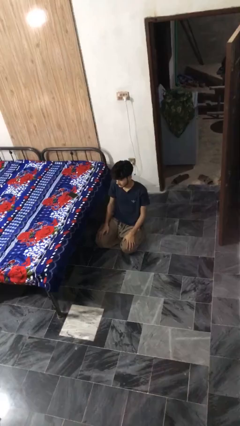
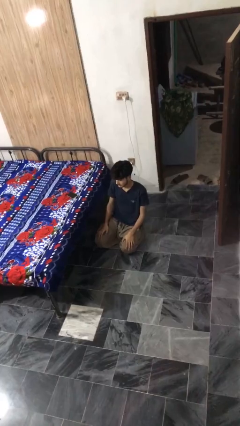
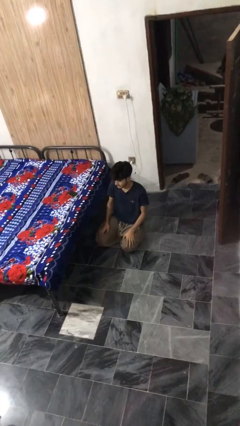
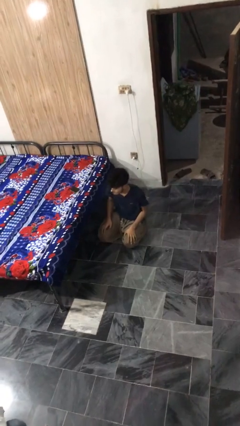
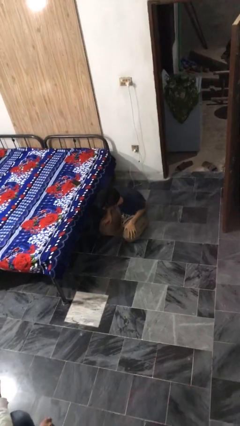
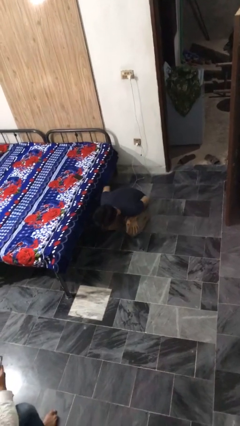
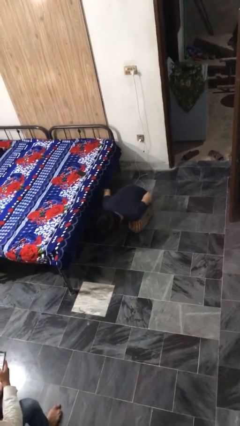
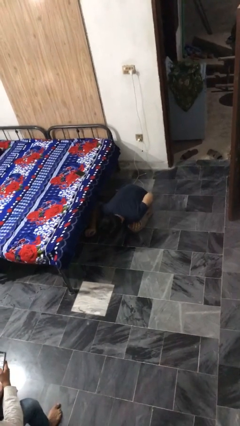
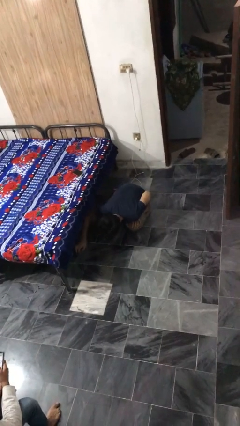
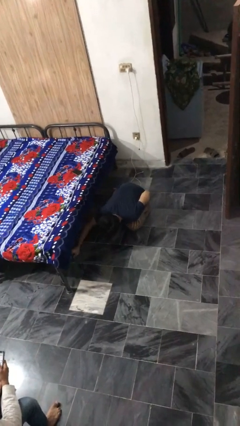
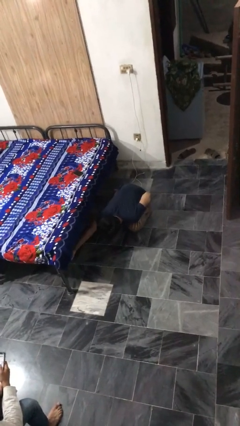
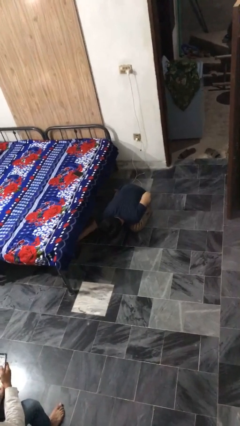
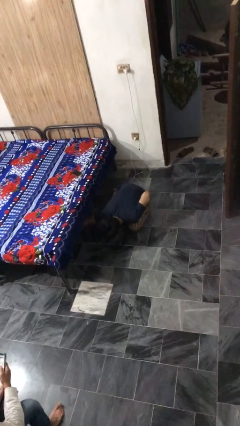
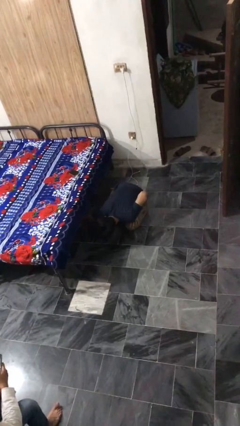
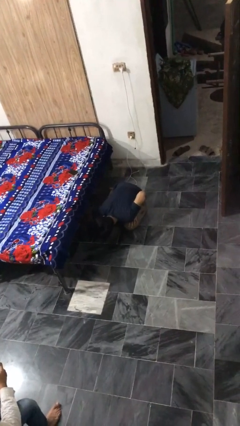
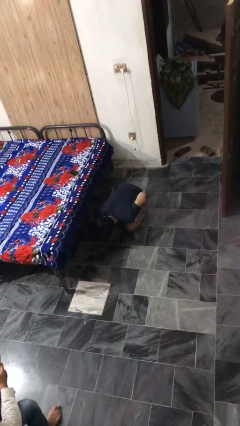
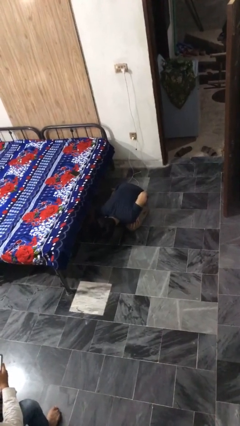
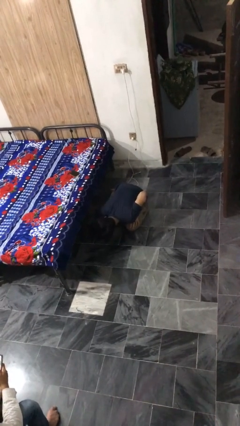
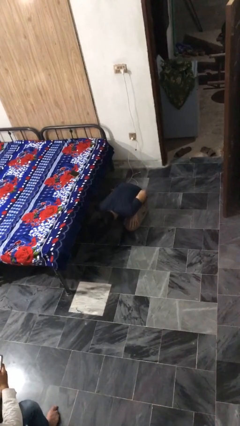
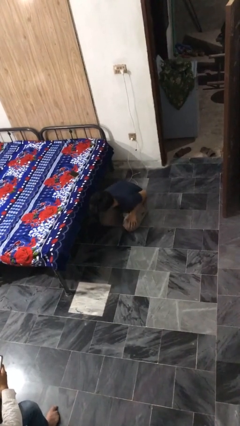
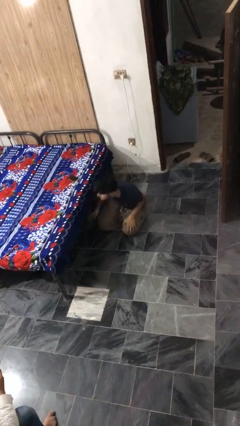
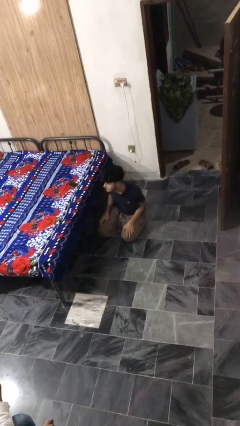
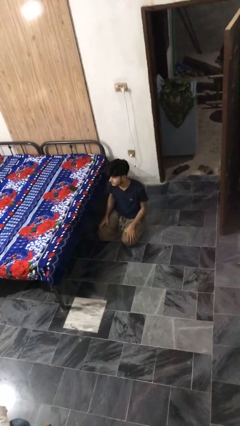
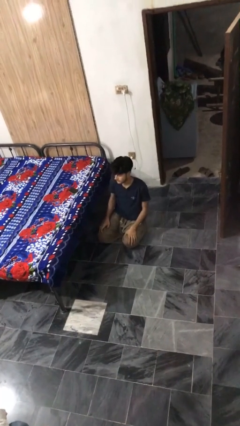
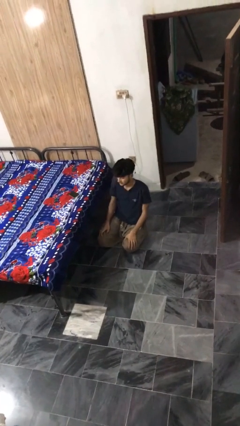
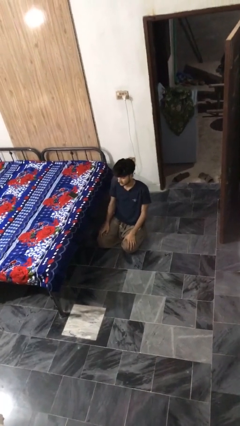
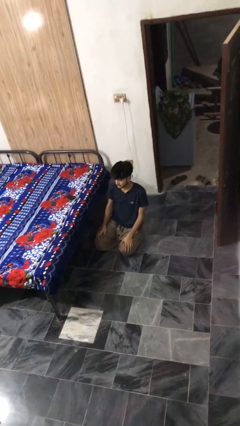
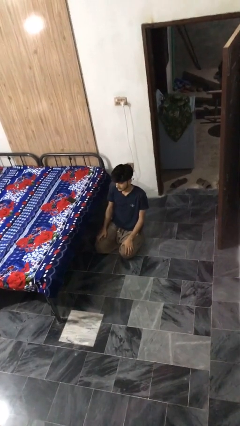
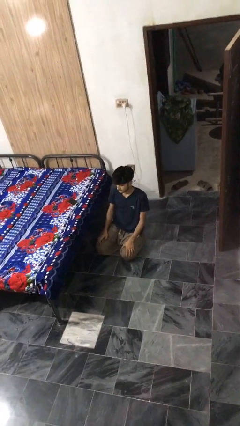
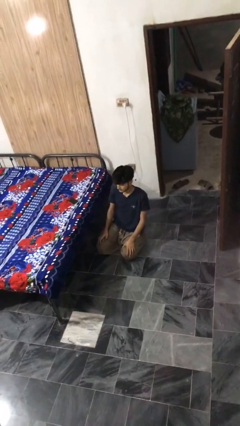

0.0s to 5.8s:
person searches under bed

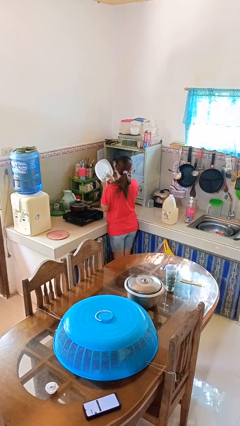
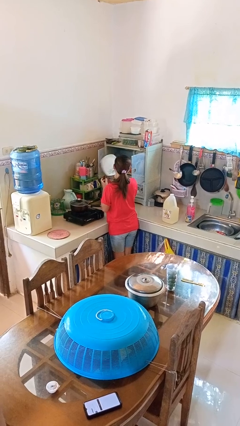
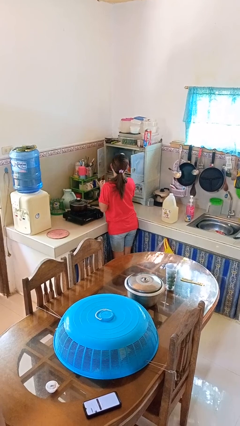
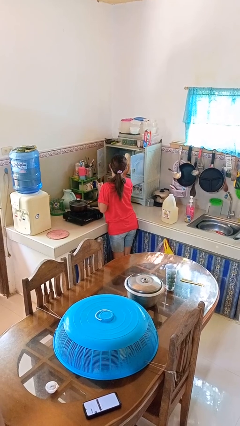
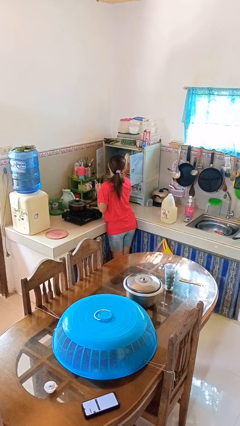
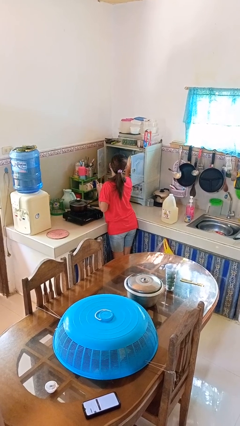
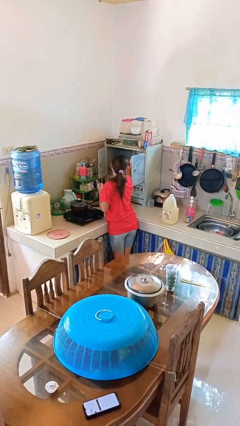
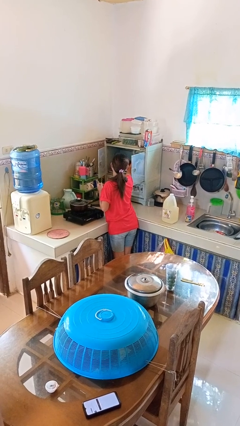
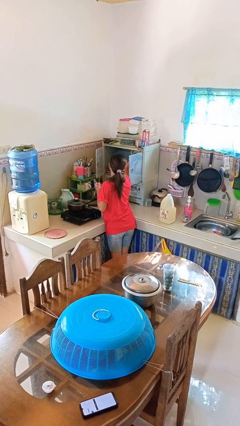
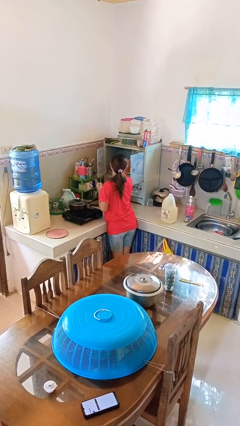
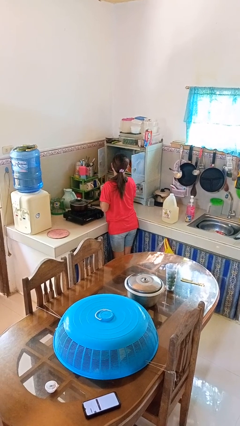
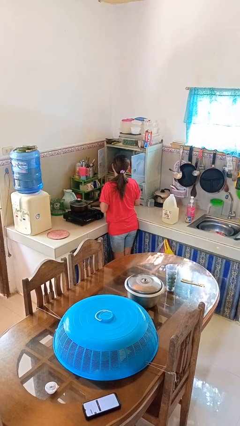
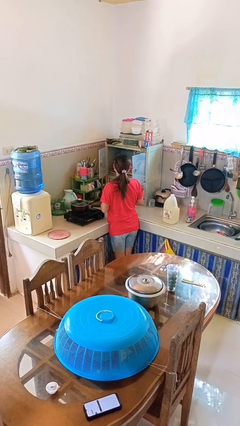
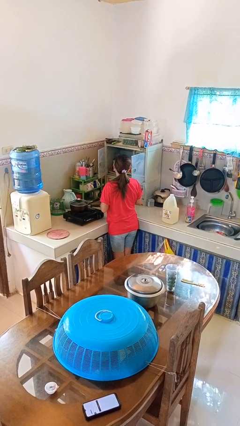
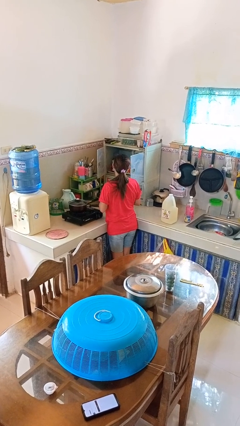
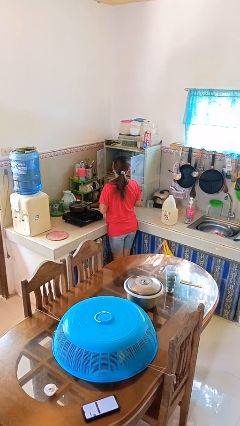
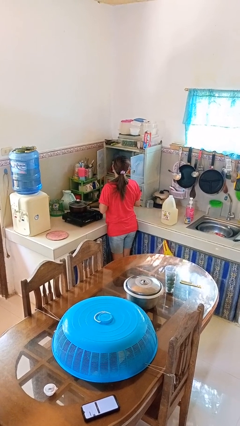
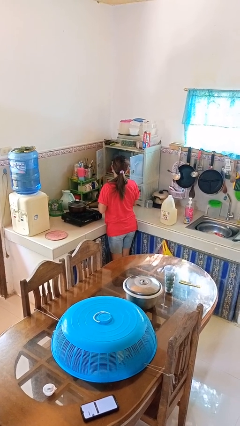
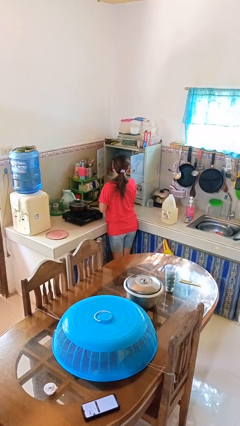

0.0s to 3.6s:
person puts object in cabinet

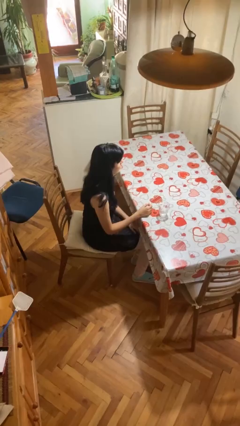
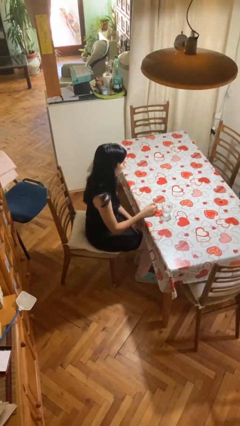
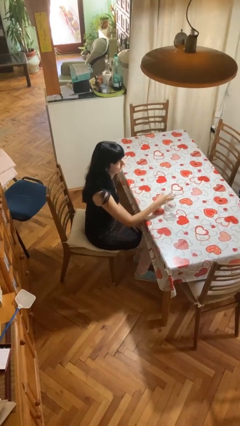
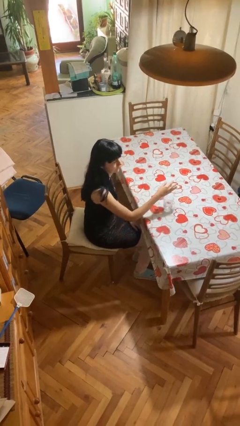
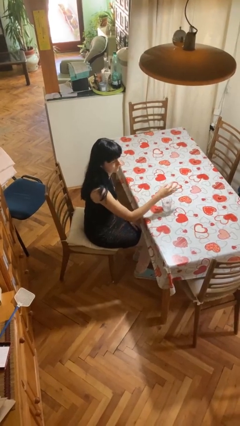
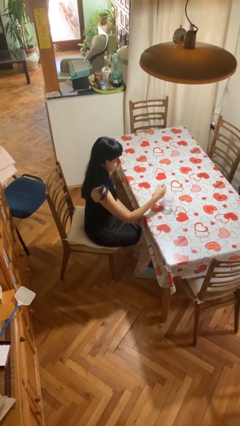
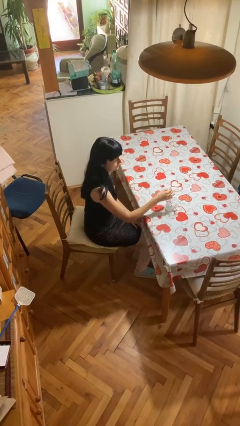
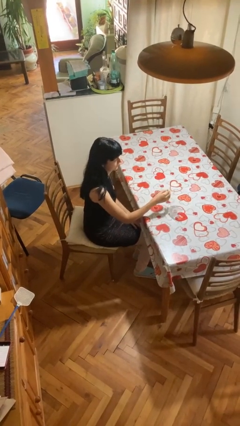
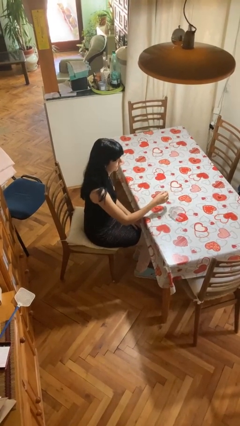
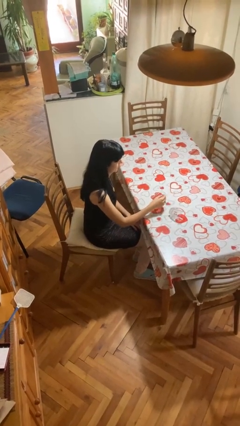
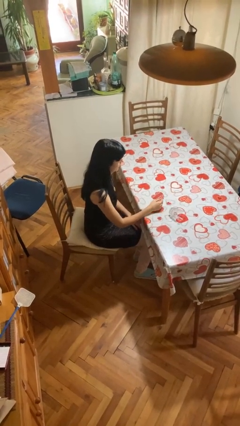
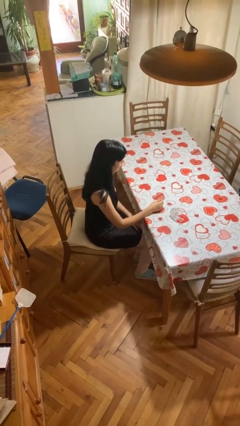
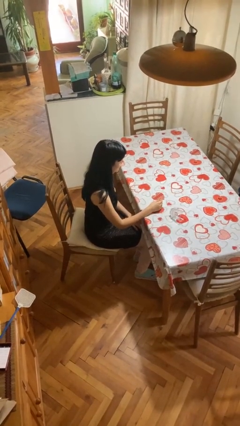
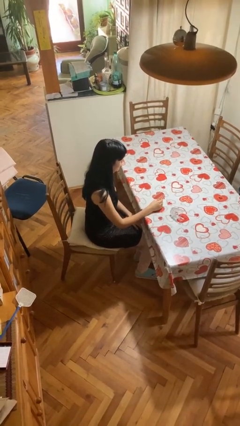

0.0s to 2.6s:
person knocks over glass

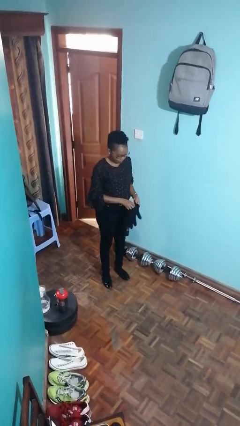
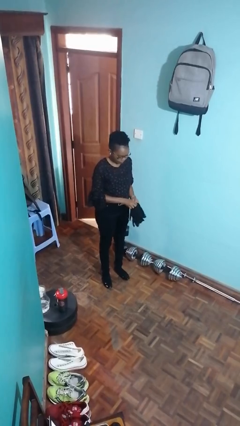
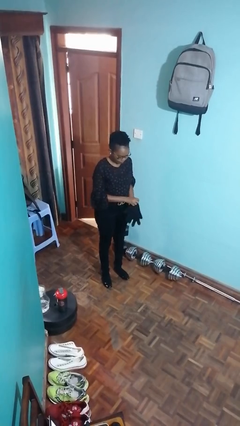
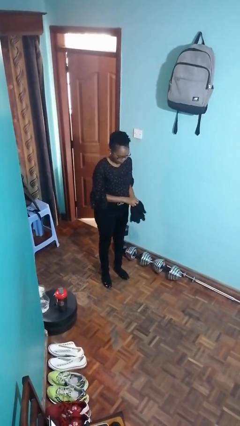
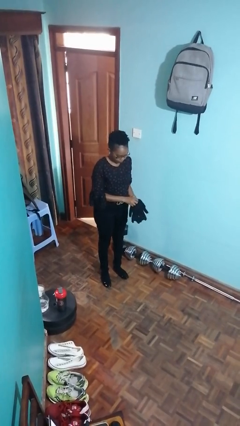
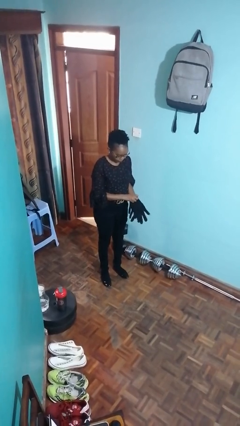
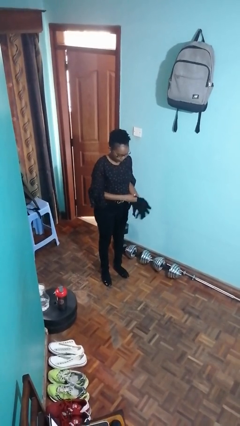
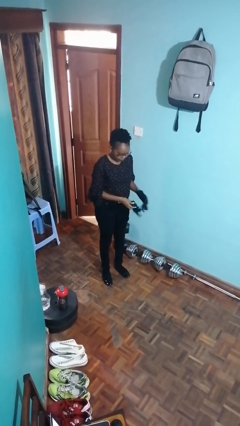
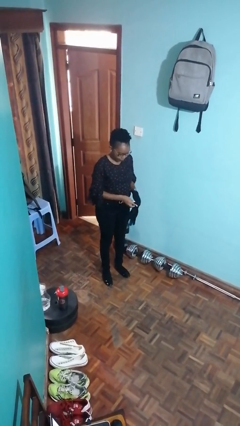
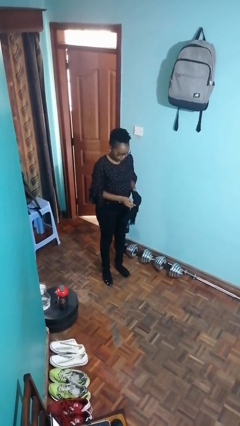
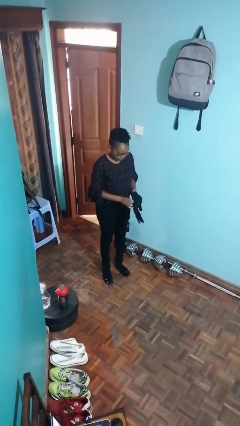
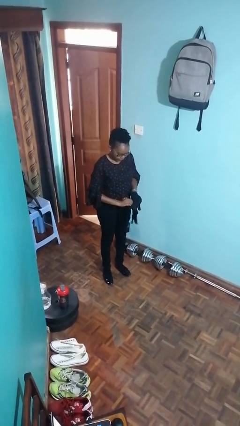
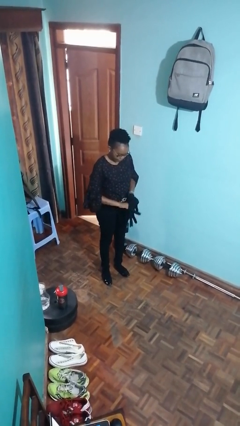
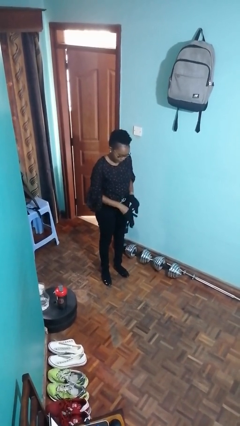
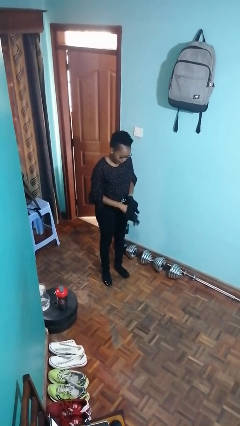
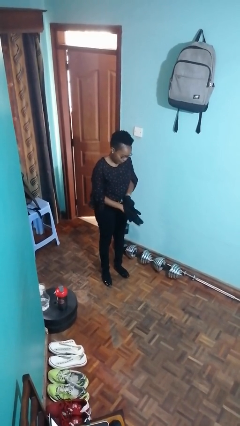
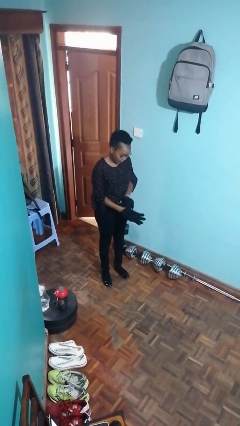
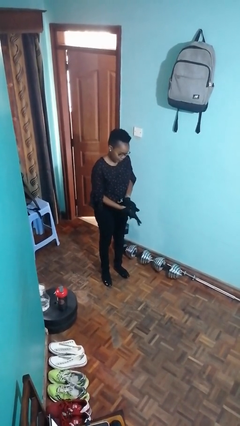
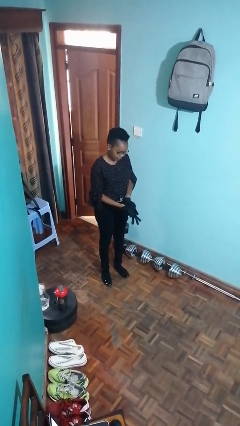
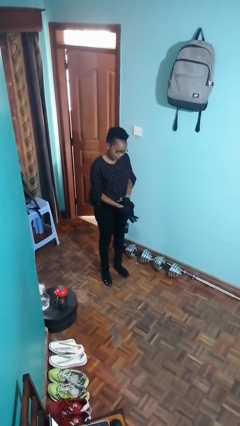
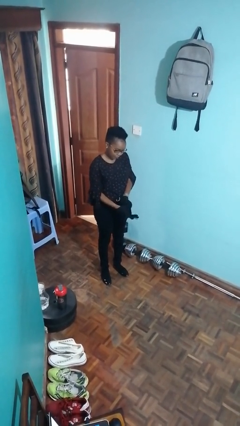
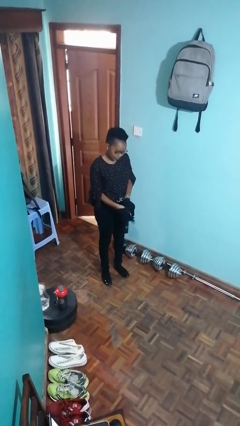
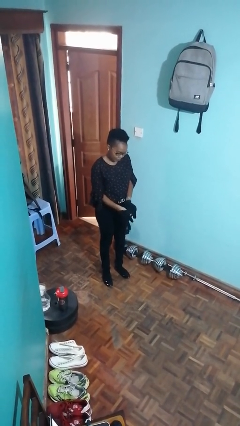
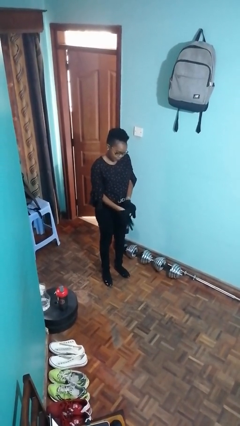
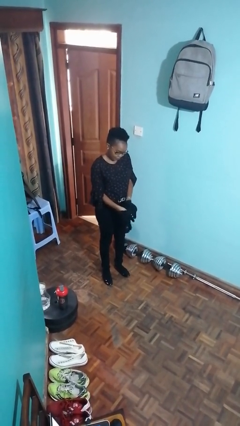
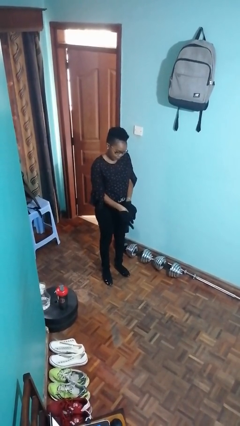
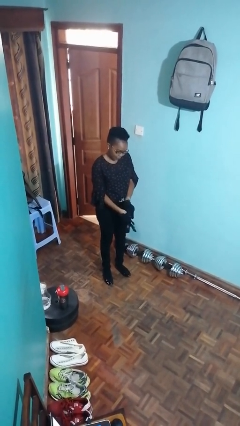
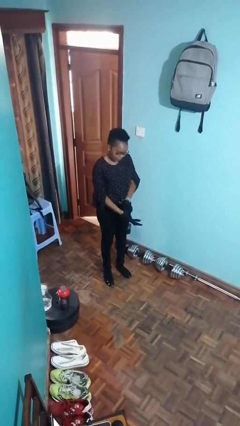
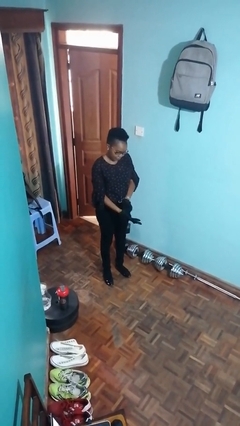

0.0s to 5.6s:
person puts on gloves

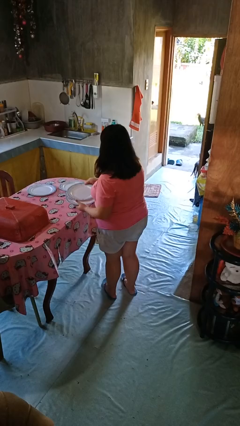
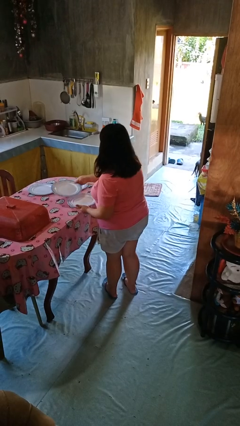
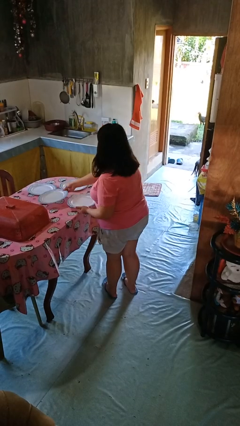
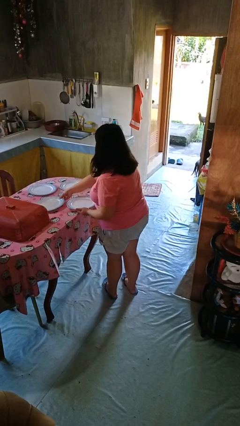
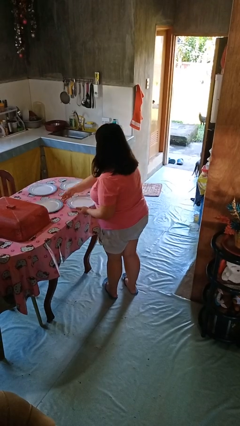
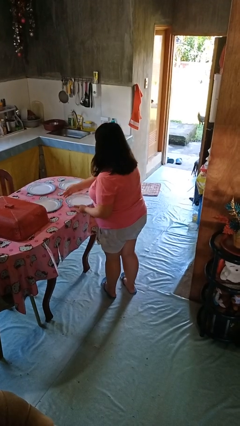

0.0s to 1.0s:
person sets table
